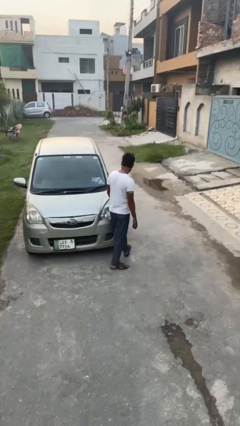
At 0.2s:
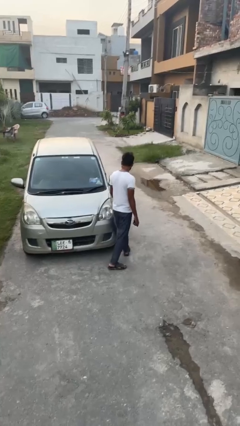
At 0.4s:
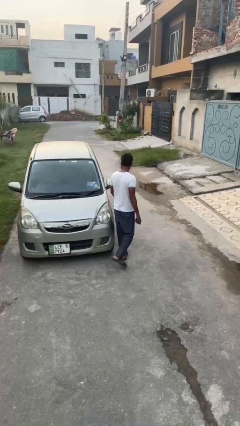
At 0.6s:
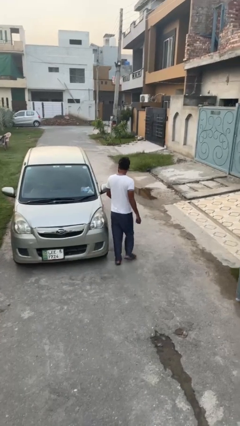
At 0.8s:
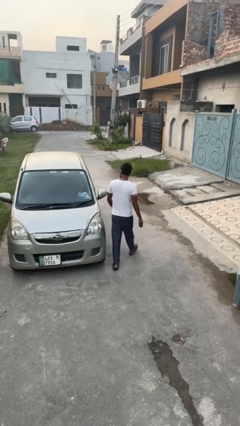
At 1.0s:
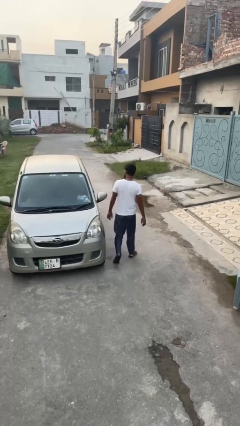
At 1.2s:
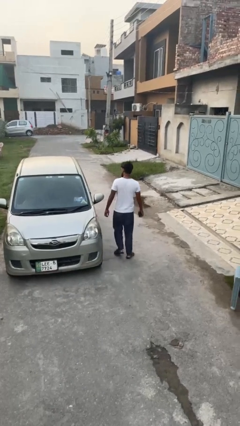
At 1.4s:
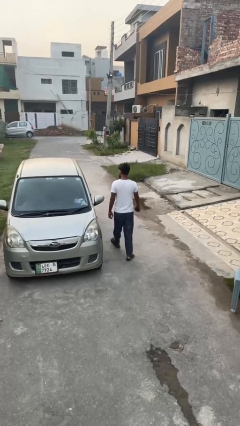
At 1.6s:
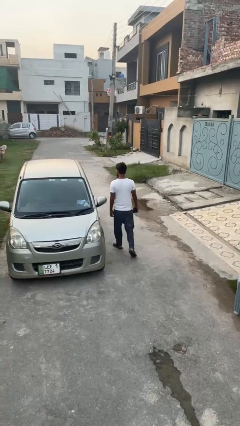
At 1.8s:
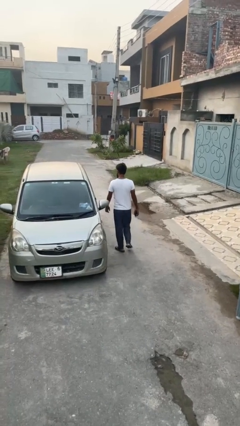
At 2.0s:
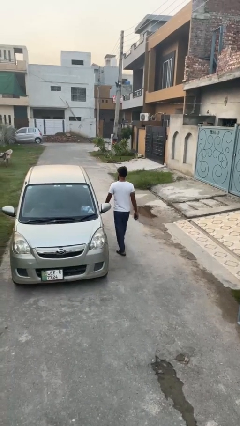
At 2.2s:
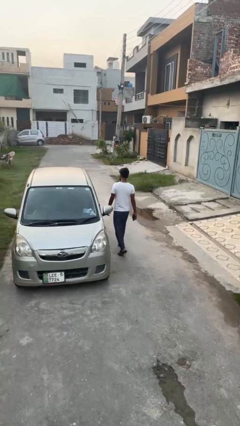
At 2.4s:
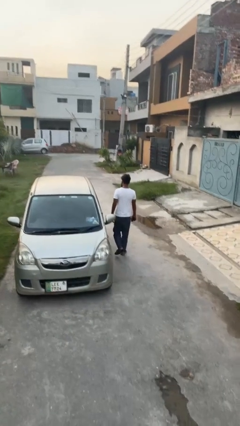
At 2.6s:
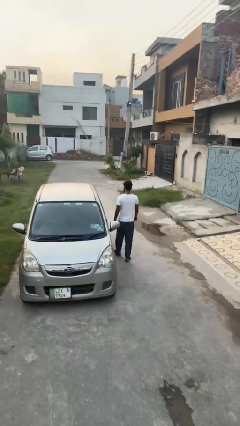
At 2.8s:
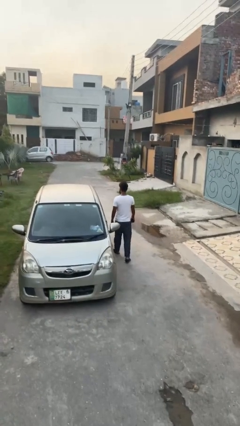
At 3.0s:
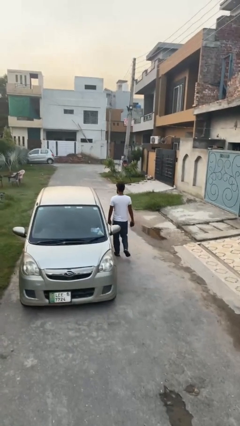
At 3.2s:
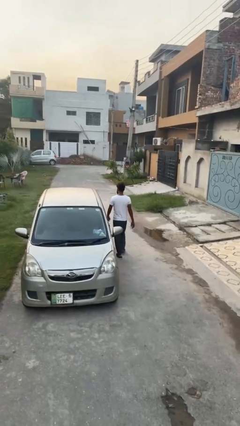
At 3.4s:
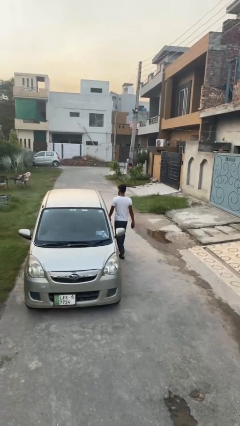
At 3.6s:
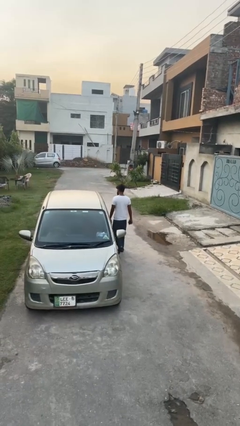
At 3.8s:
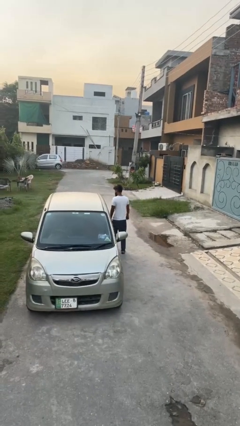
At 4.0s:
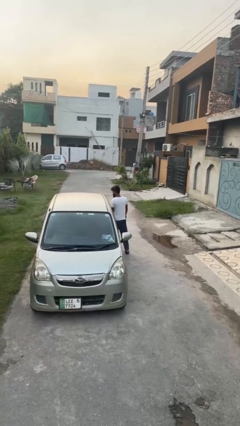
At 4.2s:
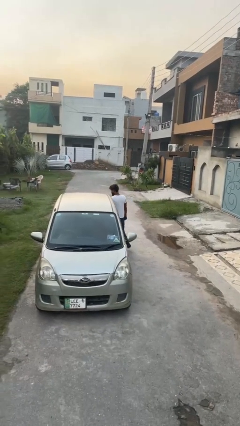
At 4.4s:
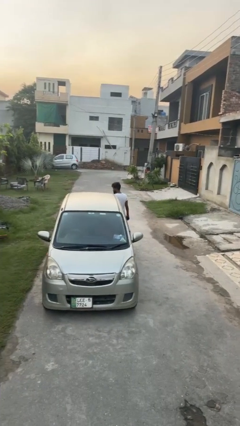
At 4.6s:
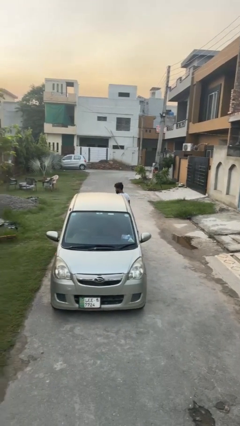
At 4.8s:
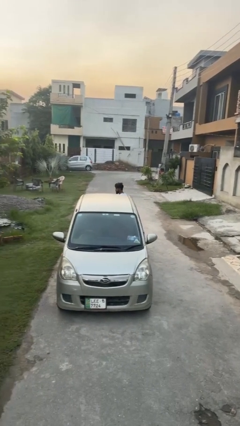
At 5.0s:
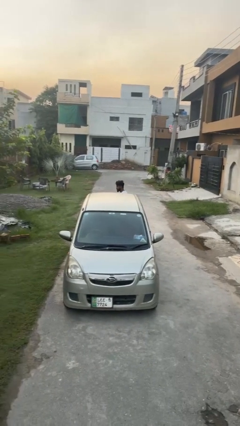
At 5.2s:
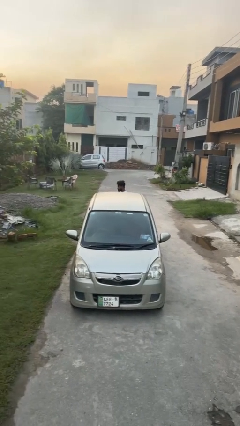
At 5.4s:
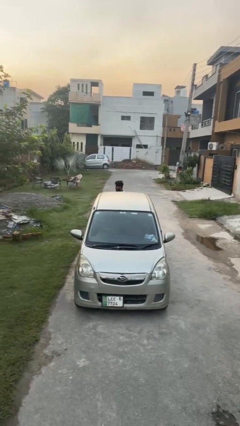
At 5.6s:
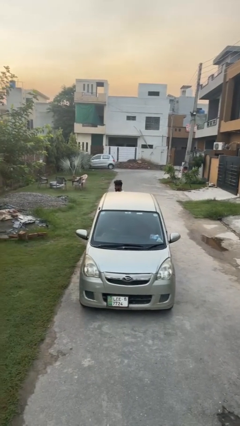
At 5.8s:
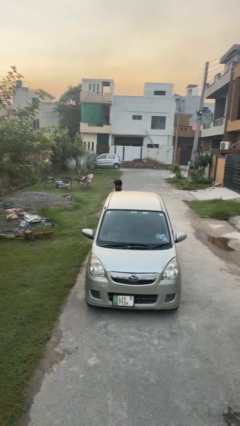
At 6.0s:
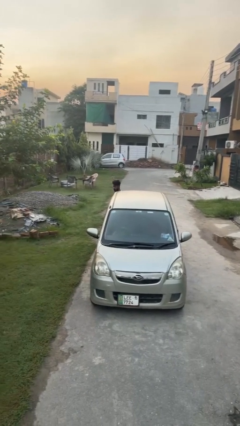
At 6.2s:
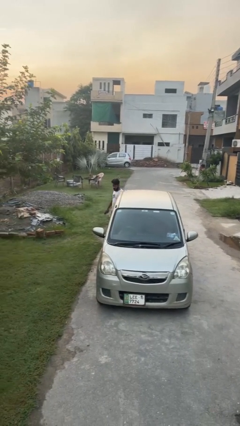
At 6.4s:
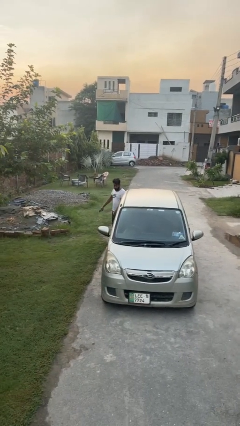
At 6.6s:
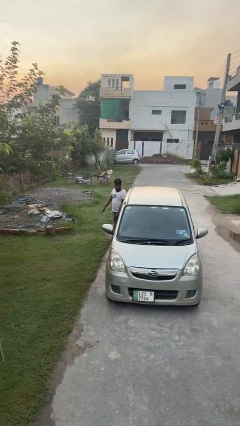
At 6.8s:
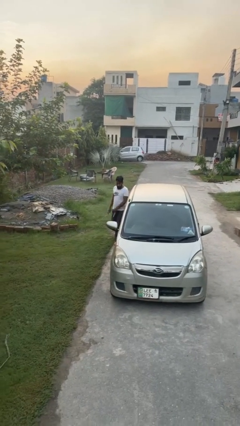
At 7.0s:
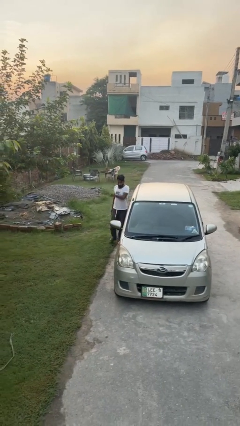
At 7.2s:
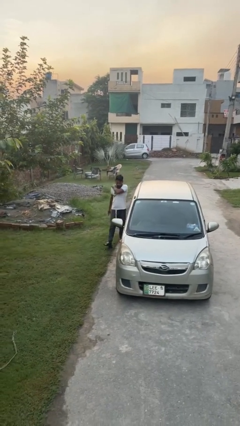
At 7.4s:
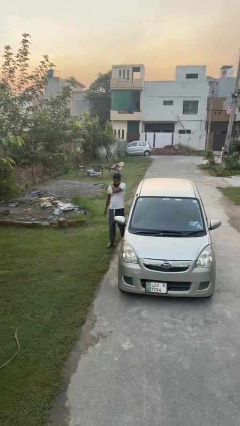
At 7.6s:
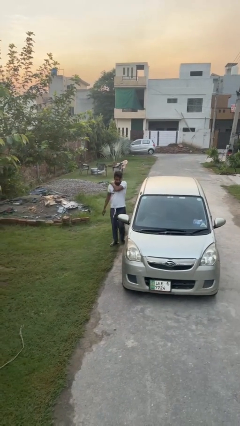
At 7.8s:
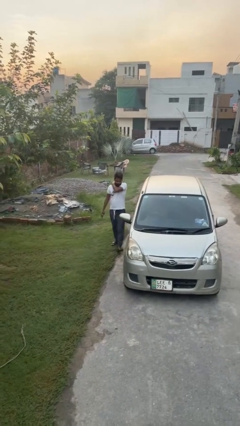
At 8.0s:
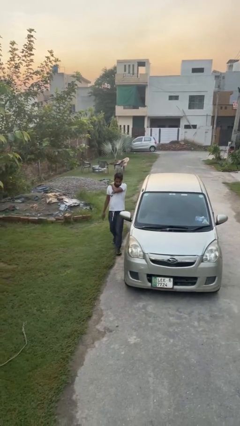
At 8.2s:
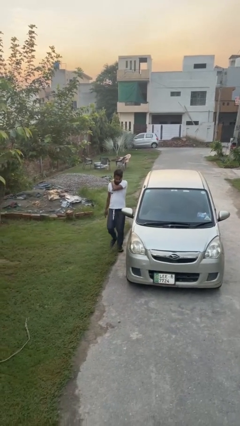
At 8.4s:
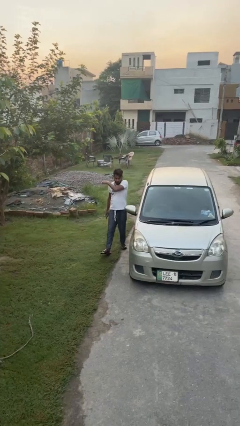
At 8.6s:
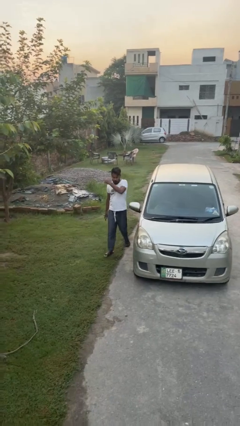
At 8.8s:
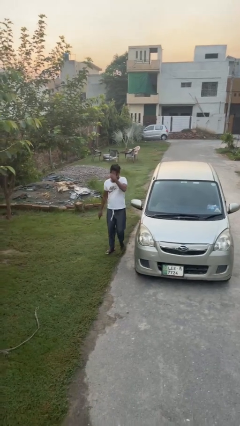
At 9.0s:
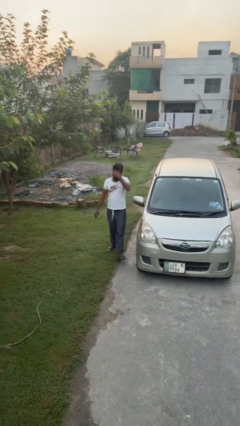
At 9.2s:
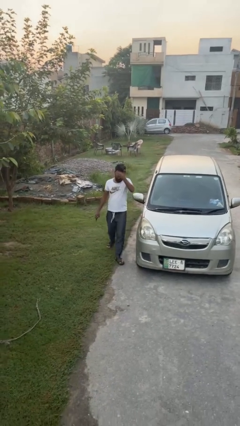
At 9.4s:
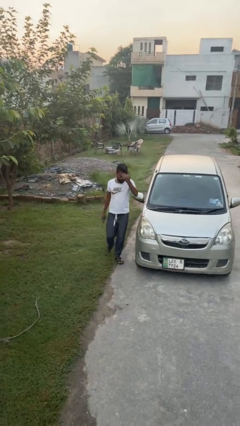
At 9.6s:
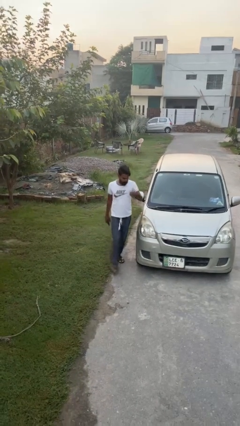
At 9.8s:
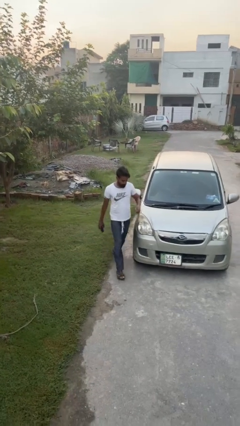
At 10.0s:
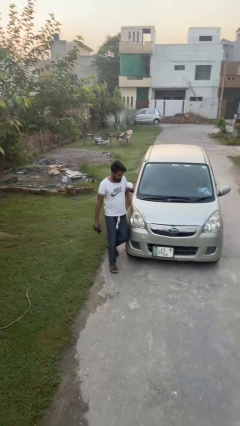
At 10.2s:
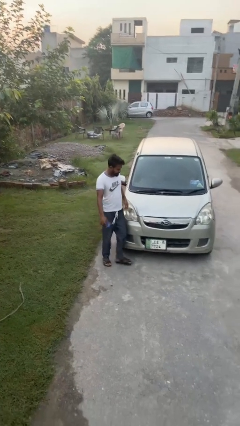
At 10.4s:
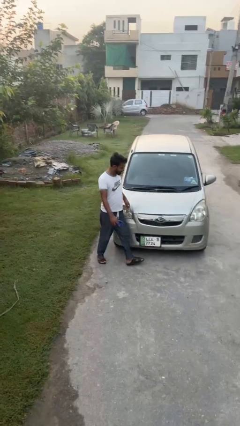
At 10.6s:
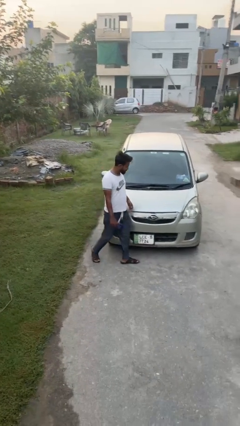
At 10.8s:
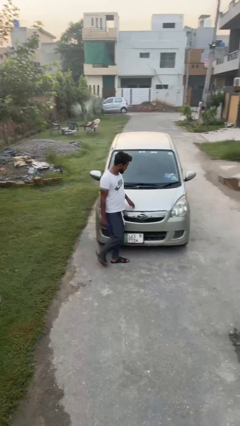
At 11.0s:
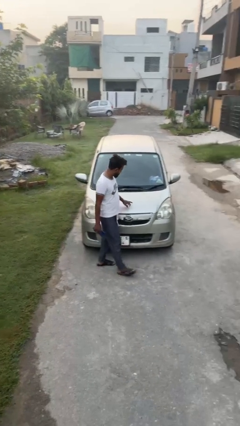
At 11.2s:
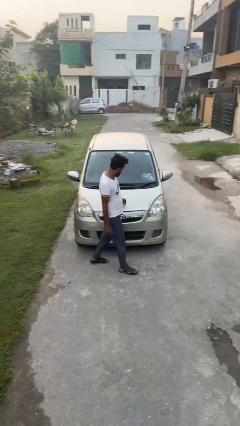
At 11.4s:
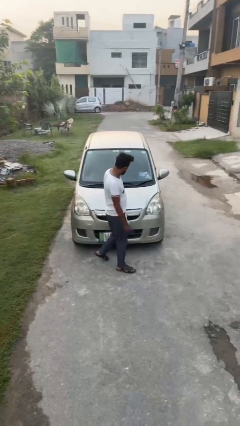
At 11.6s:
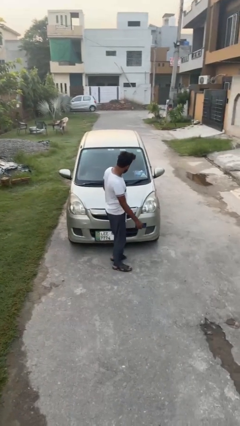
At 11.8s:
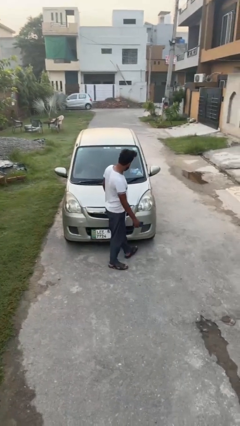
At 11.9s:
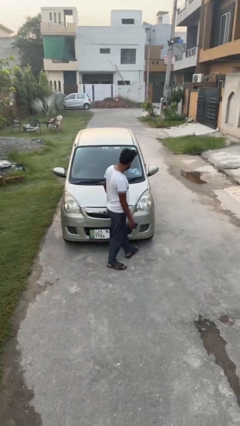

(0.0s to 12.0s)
person walks around car

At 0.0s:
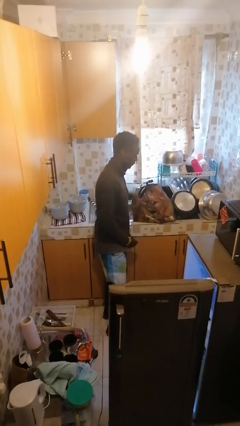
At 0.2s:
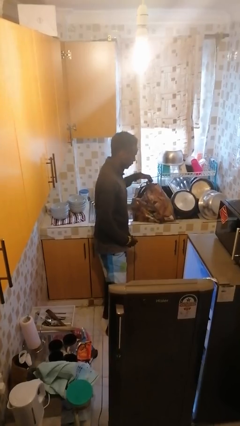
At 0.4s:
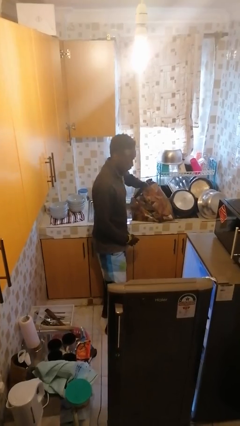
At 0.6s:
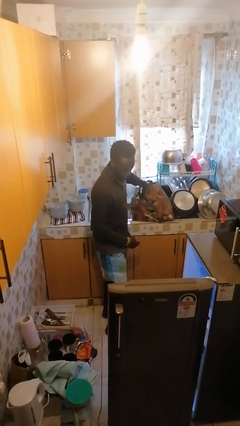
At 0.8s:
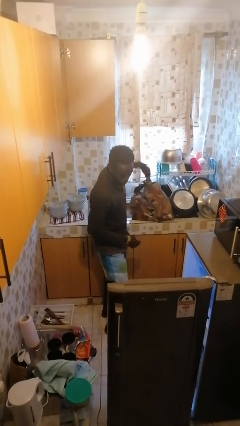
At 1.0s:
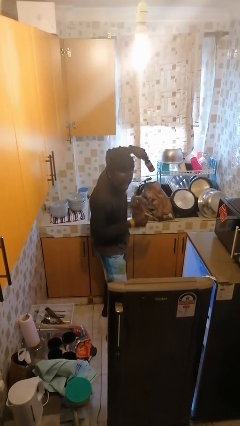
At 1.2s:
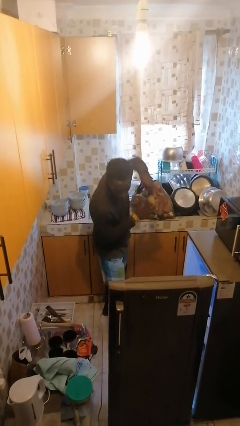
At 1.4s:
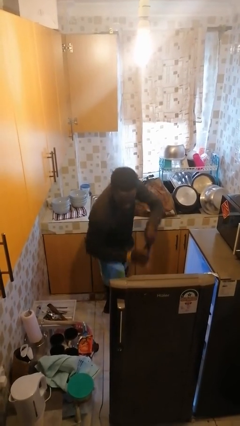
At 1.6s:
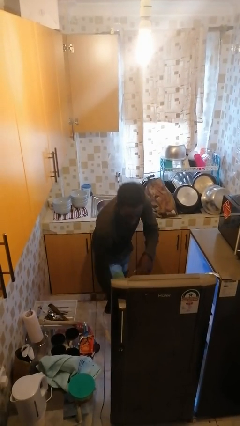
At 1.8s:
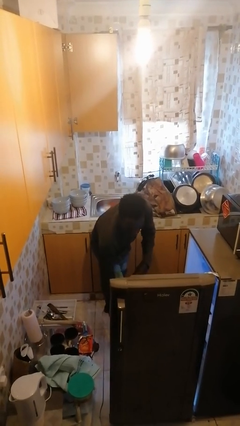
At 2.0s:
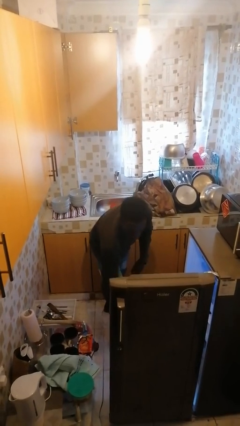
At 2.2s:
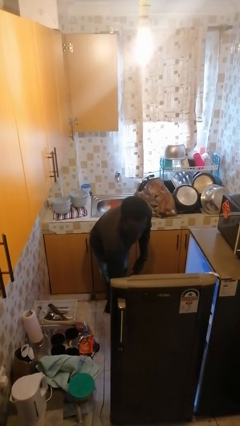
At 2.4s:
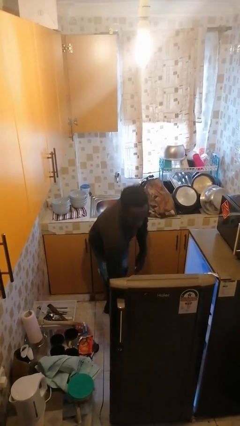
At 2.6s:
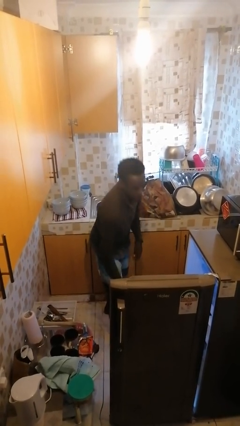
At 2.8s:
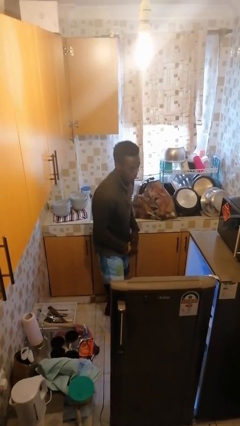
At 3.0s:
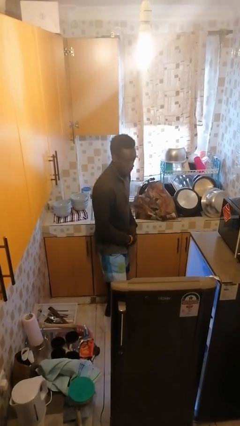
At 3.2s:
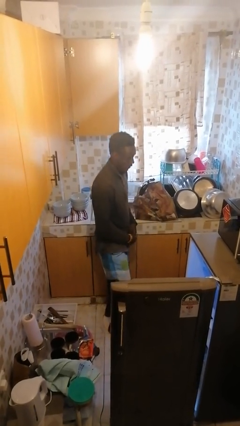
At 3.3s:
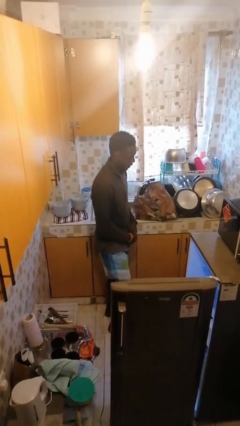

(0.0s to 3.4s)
person loads groceries into refrigerator

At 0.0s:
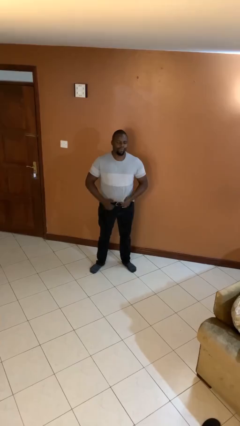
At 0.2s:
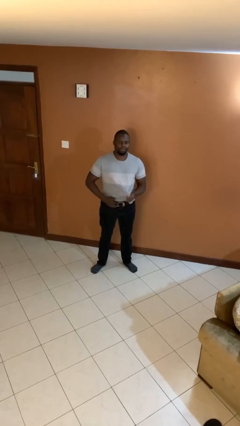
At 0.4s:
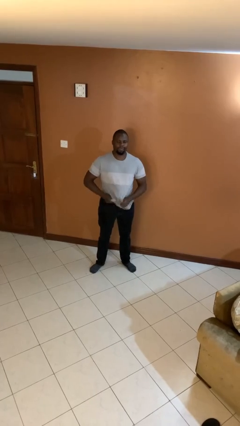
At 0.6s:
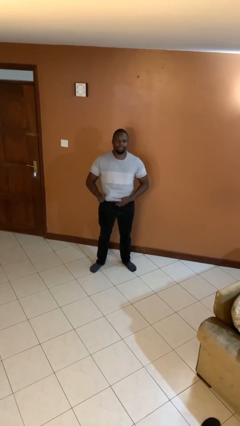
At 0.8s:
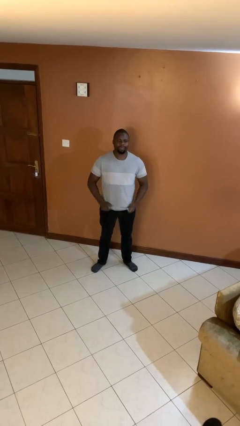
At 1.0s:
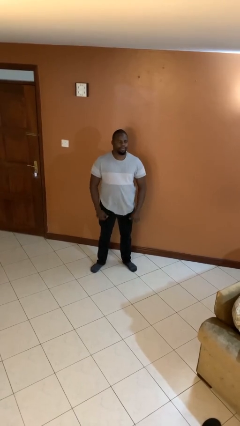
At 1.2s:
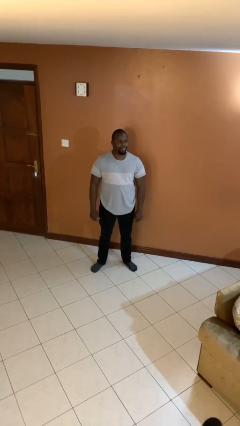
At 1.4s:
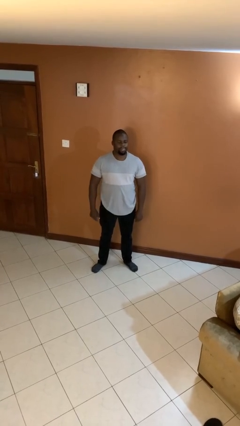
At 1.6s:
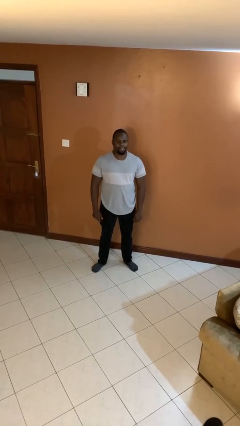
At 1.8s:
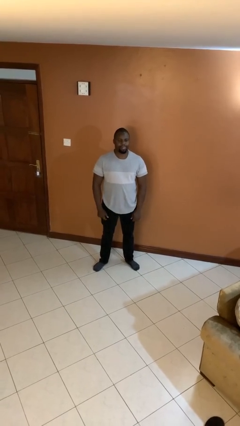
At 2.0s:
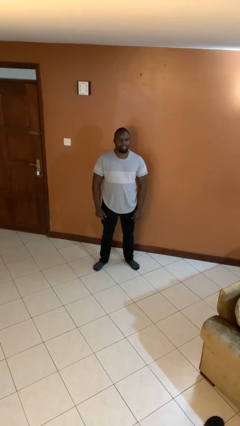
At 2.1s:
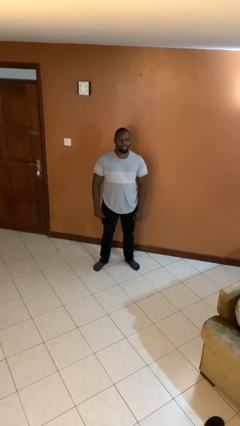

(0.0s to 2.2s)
person untucks shirt

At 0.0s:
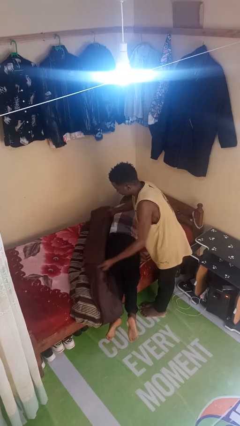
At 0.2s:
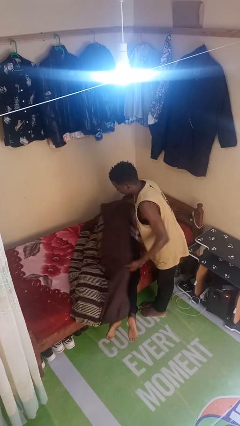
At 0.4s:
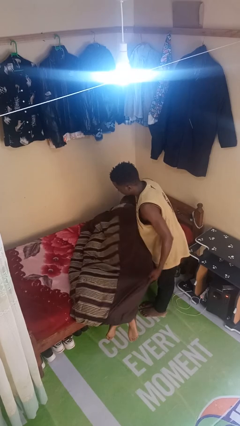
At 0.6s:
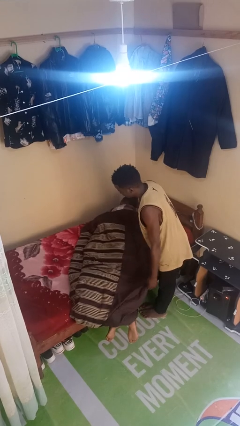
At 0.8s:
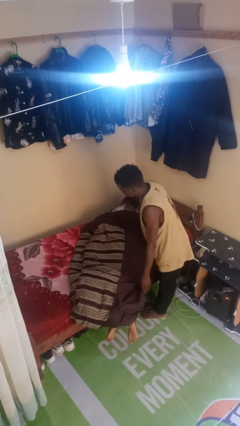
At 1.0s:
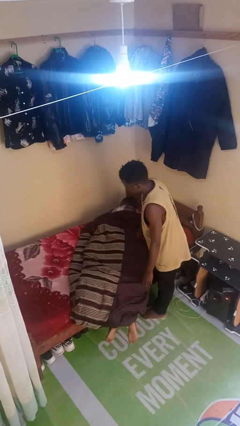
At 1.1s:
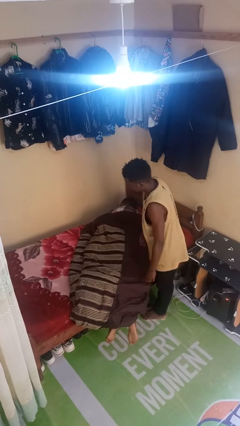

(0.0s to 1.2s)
person covers friend with blanket
